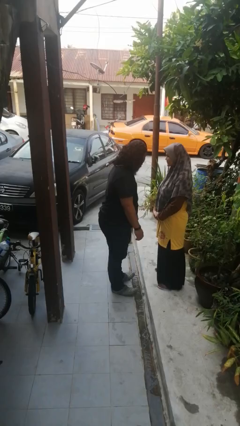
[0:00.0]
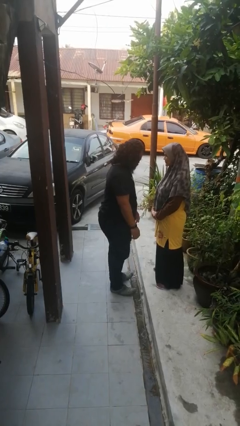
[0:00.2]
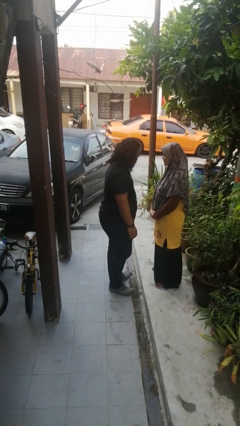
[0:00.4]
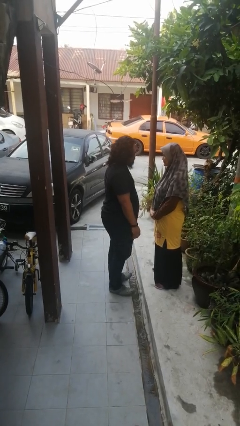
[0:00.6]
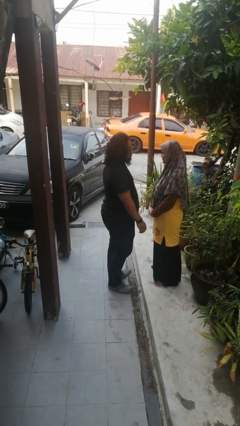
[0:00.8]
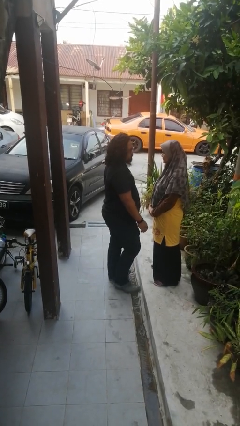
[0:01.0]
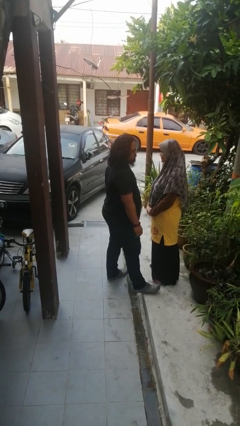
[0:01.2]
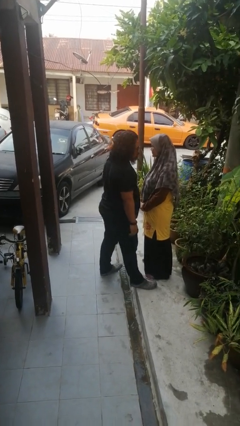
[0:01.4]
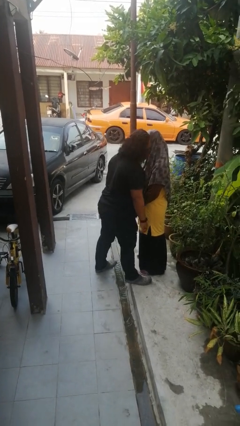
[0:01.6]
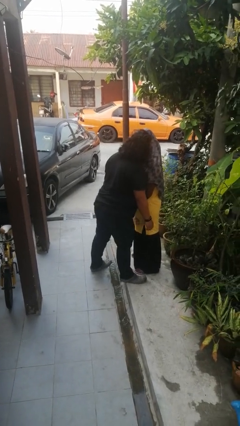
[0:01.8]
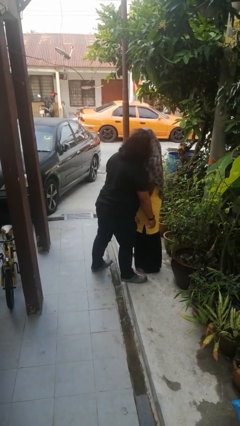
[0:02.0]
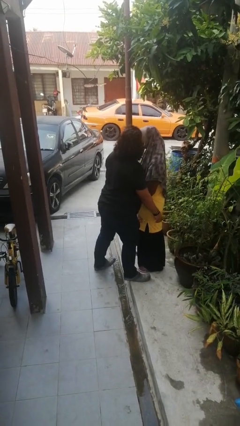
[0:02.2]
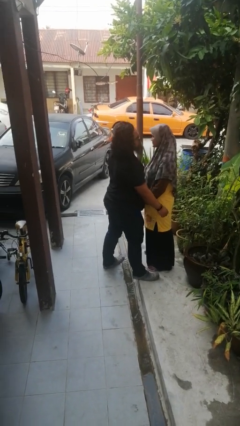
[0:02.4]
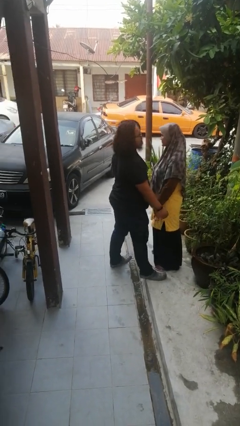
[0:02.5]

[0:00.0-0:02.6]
person kisses cheek of person

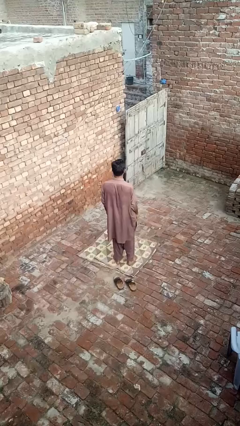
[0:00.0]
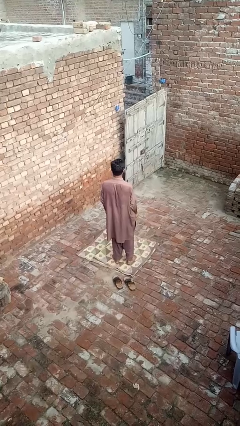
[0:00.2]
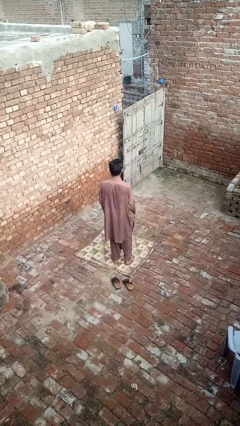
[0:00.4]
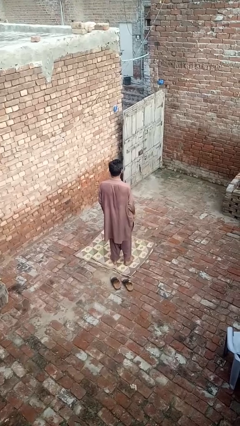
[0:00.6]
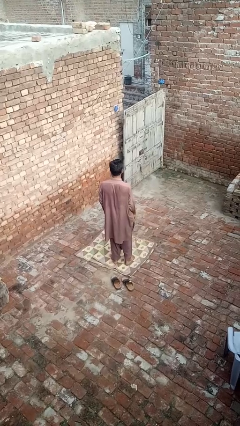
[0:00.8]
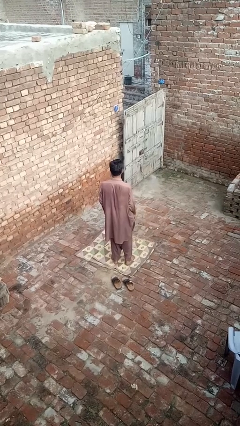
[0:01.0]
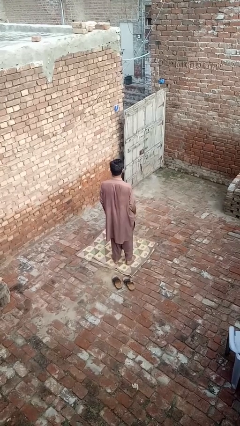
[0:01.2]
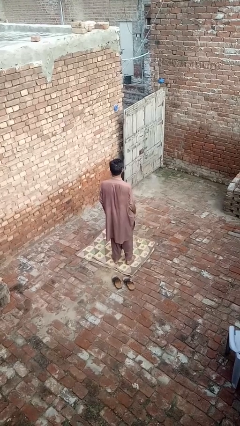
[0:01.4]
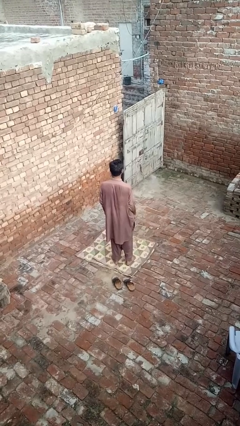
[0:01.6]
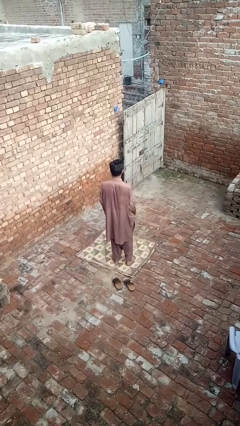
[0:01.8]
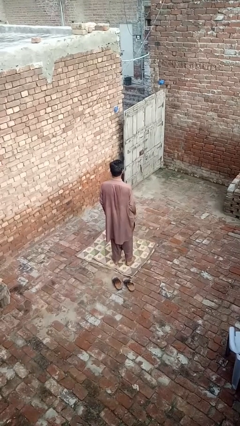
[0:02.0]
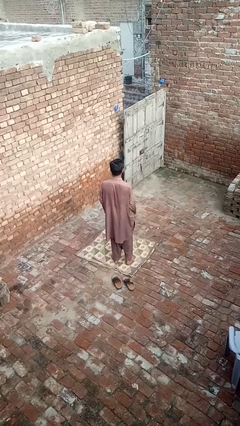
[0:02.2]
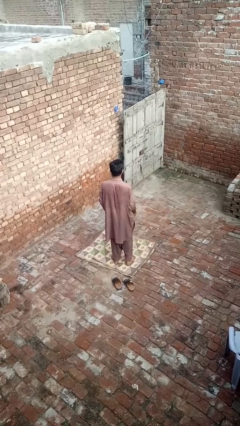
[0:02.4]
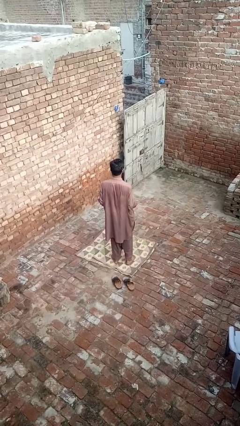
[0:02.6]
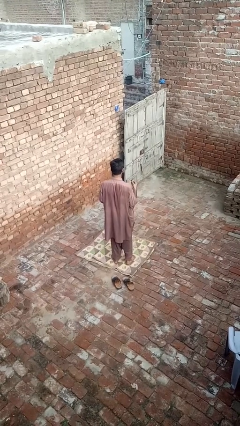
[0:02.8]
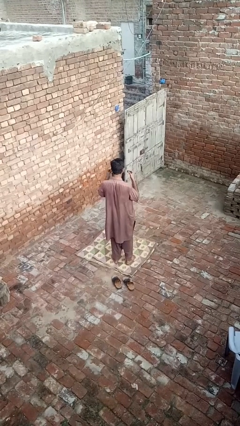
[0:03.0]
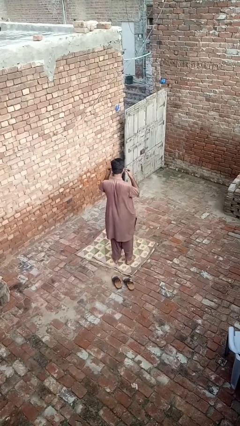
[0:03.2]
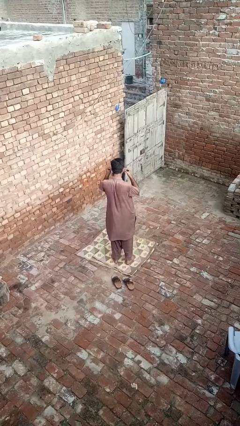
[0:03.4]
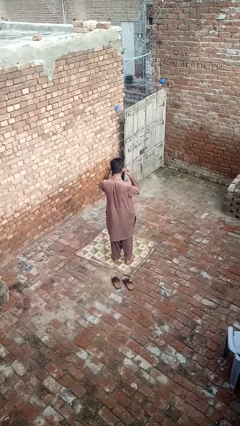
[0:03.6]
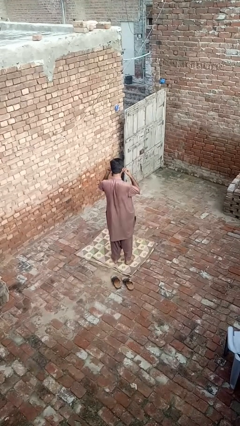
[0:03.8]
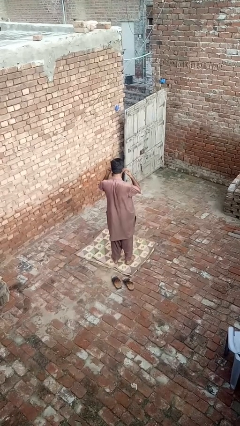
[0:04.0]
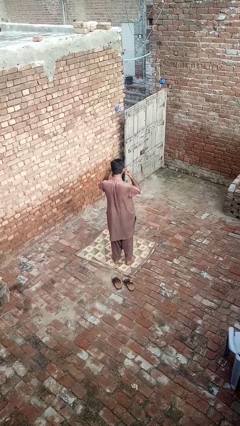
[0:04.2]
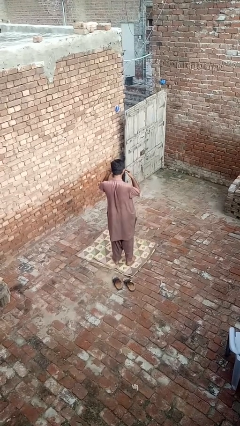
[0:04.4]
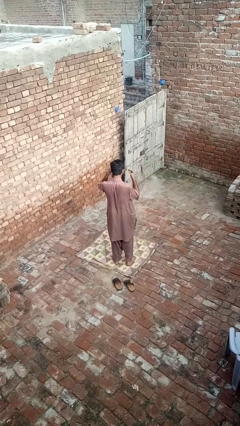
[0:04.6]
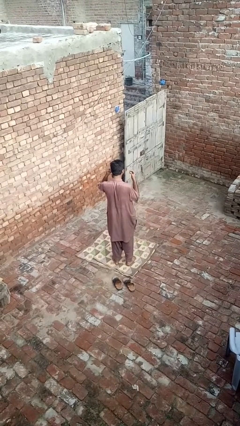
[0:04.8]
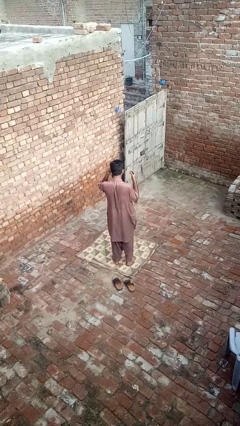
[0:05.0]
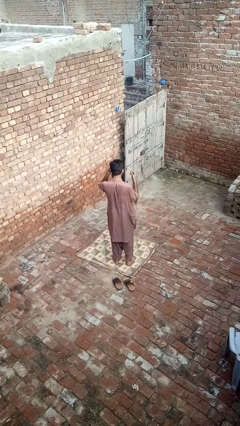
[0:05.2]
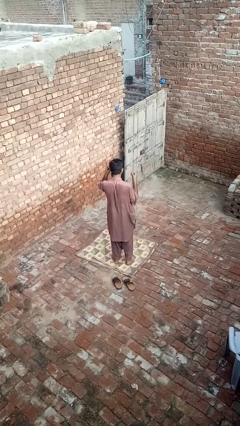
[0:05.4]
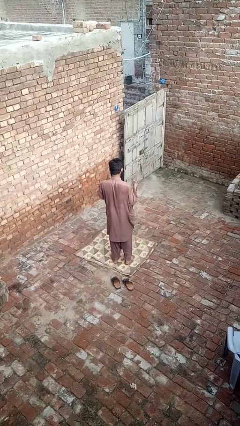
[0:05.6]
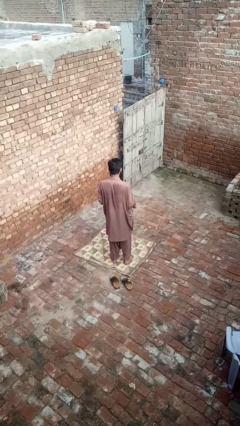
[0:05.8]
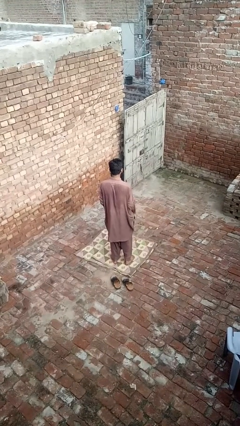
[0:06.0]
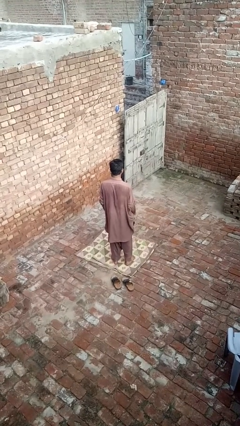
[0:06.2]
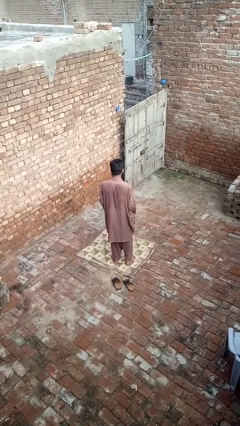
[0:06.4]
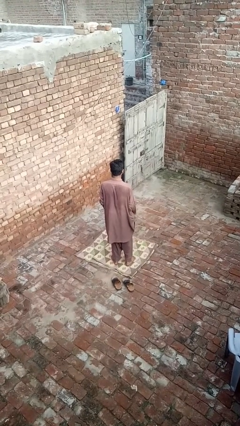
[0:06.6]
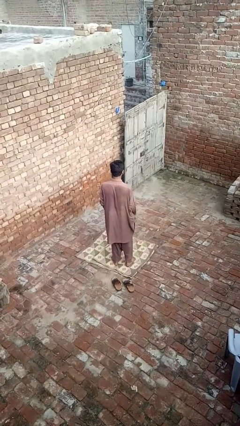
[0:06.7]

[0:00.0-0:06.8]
person puts on headphones

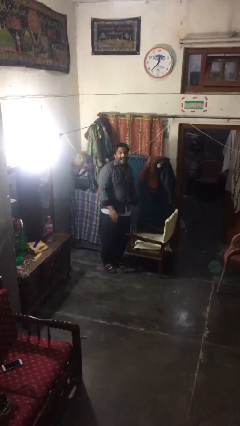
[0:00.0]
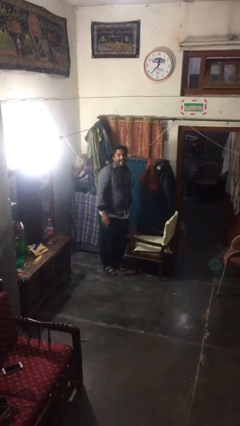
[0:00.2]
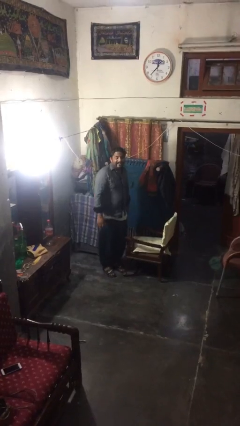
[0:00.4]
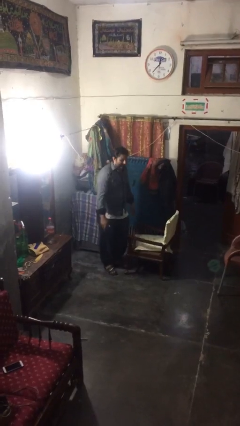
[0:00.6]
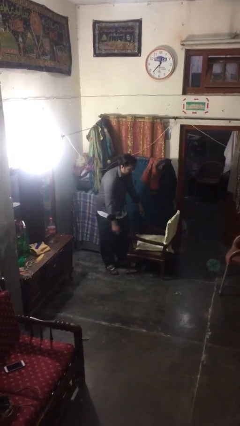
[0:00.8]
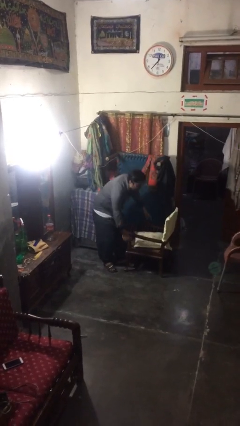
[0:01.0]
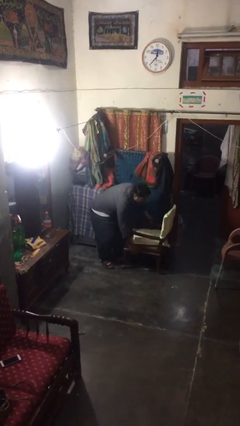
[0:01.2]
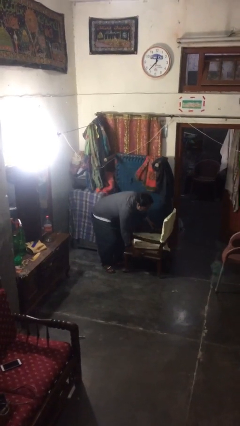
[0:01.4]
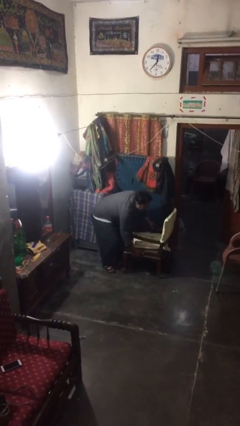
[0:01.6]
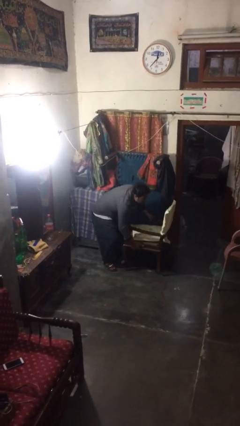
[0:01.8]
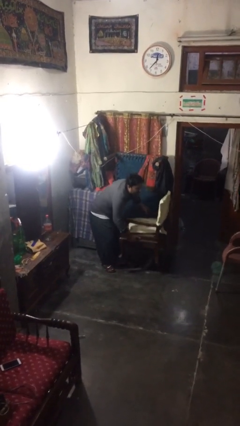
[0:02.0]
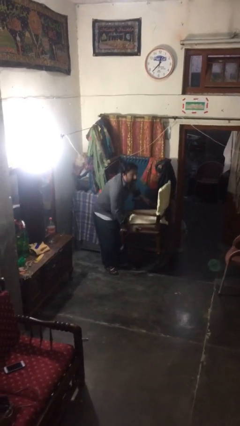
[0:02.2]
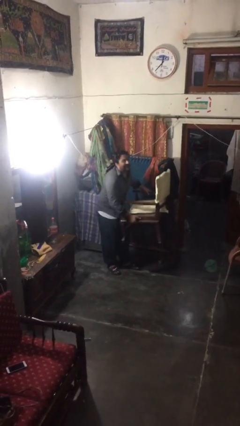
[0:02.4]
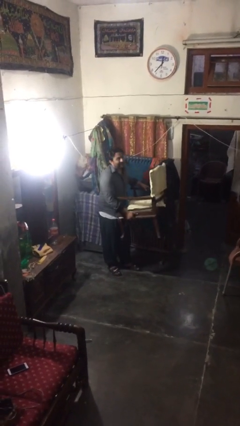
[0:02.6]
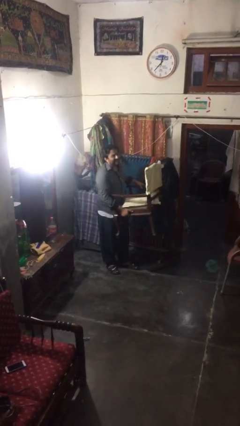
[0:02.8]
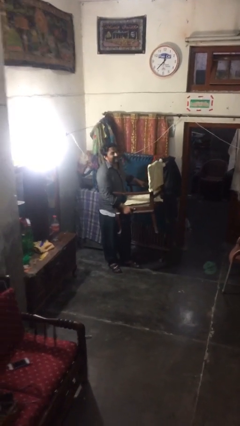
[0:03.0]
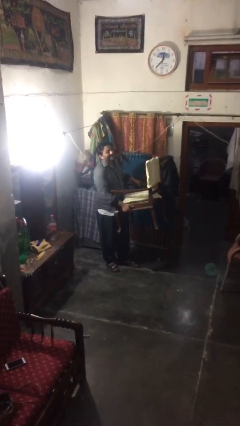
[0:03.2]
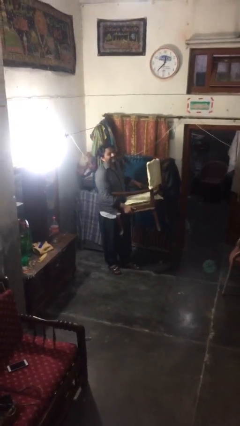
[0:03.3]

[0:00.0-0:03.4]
person picks up object from floor

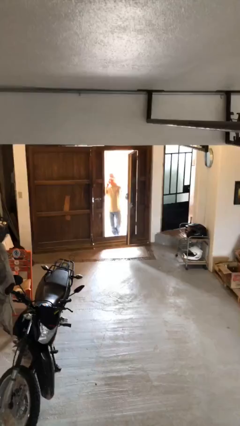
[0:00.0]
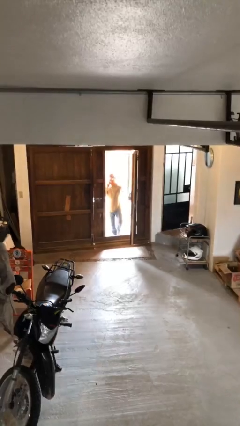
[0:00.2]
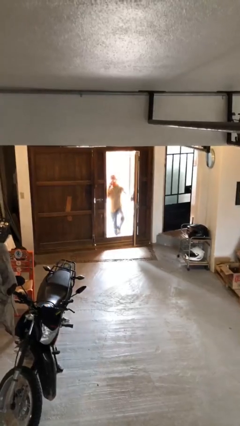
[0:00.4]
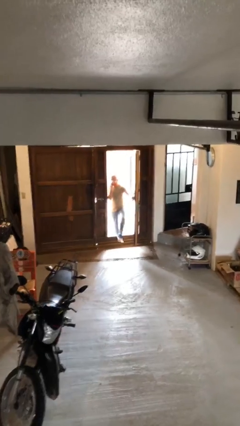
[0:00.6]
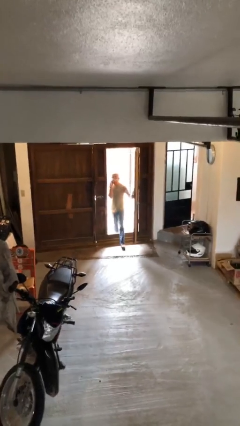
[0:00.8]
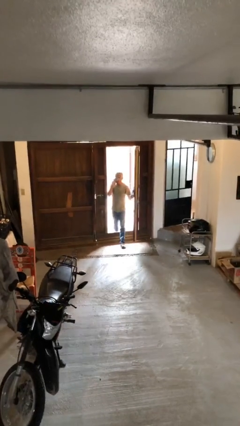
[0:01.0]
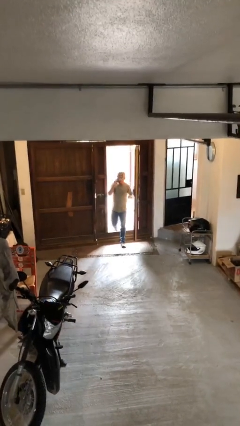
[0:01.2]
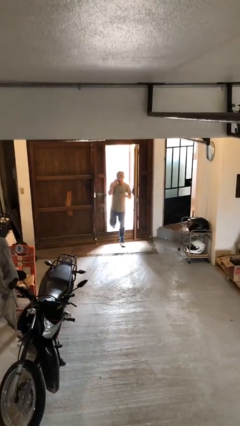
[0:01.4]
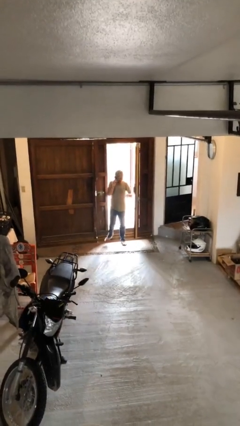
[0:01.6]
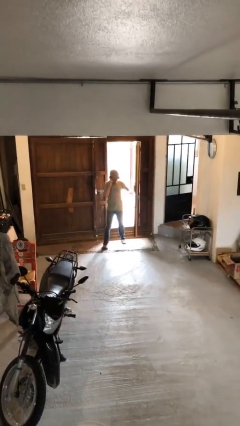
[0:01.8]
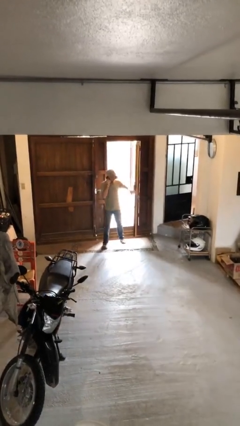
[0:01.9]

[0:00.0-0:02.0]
person enters scene through structure

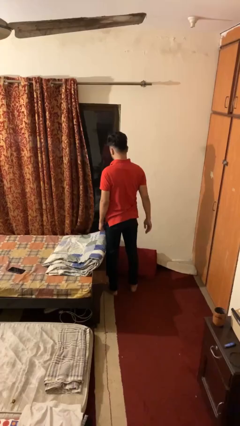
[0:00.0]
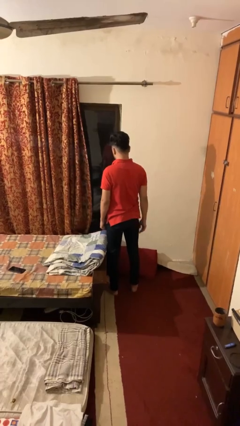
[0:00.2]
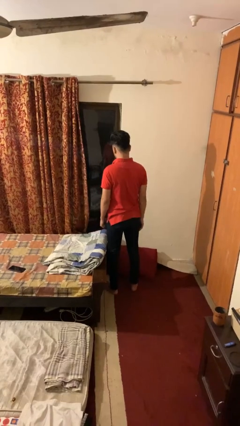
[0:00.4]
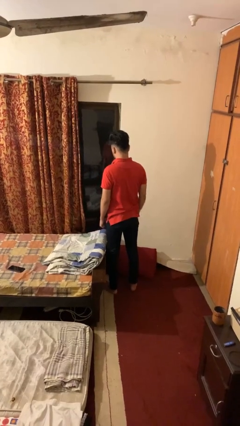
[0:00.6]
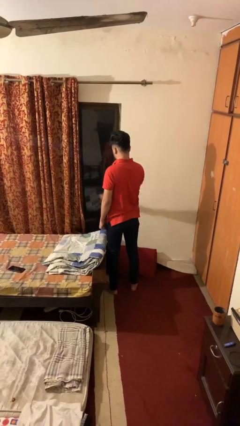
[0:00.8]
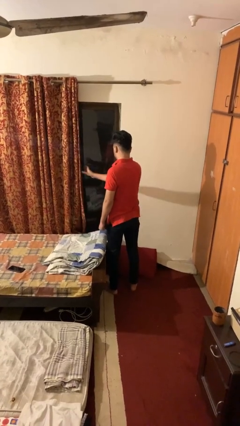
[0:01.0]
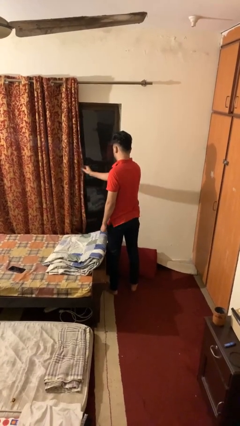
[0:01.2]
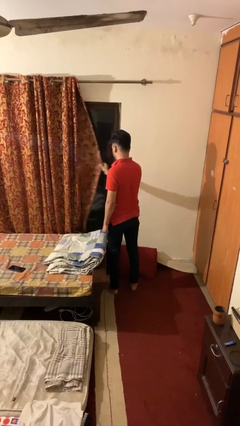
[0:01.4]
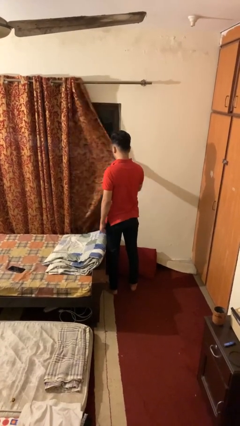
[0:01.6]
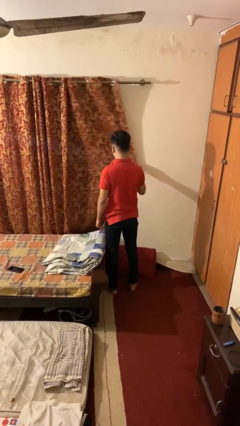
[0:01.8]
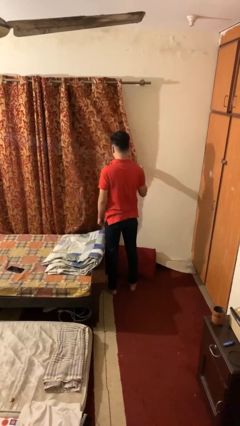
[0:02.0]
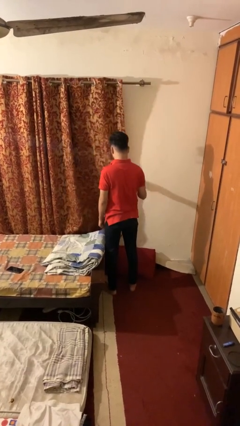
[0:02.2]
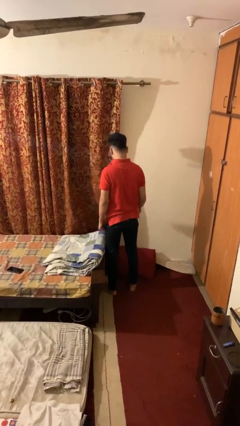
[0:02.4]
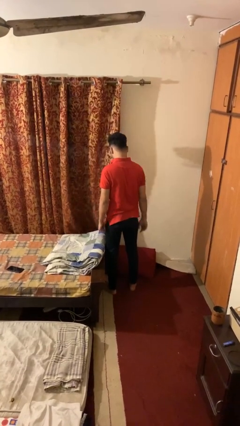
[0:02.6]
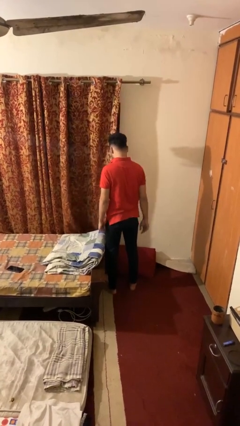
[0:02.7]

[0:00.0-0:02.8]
person closes curtains
